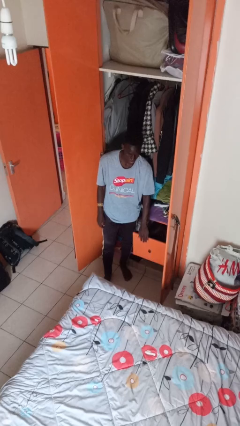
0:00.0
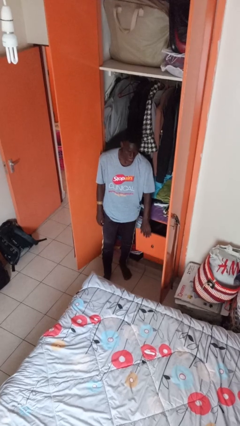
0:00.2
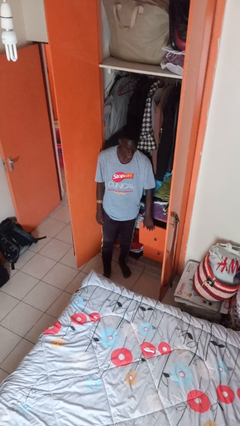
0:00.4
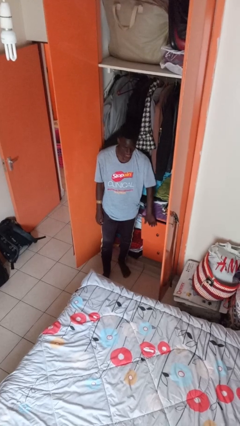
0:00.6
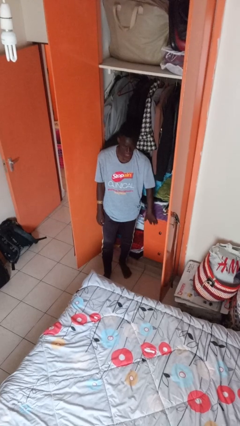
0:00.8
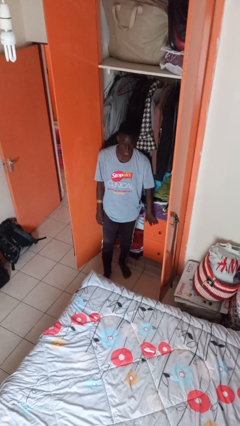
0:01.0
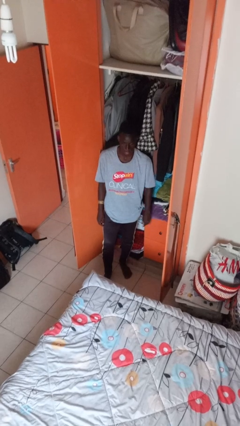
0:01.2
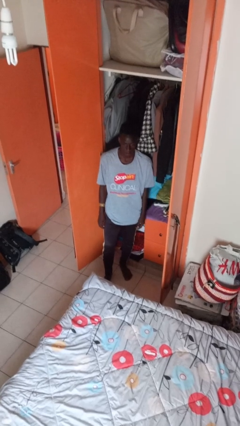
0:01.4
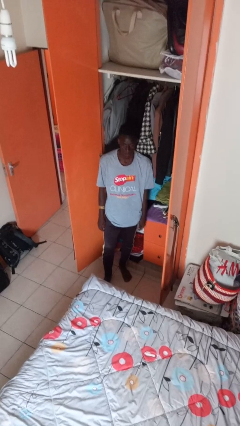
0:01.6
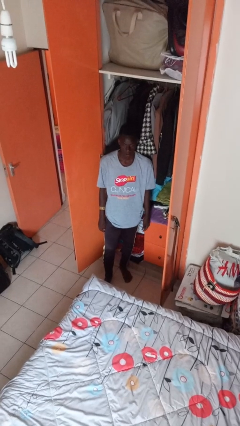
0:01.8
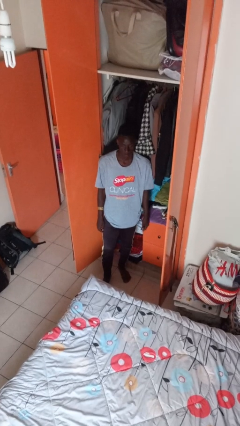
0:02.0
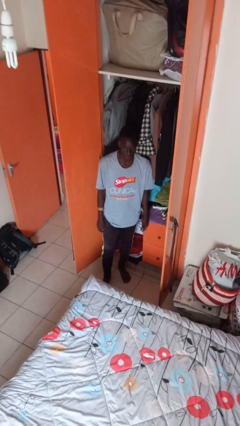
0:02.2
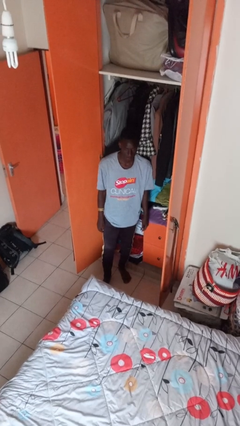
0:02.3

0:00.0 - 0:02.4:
person closes dresser drawer

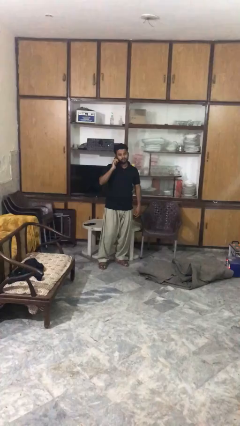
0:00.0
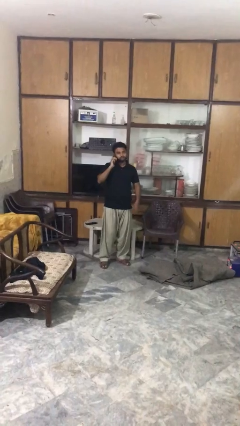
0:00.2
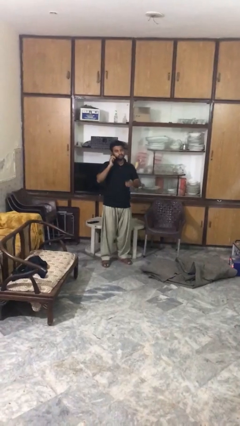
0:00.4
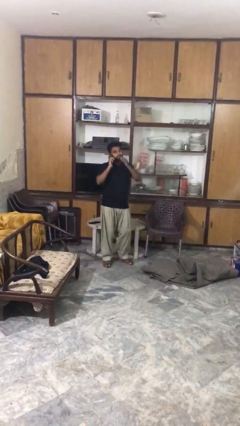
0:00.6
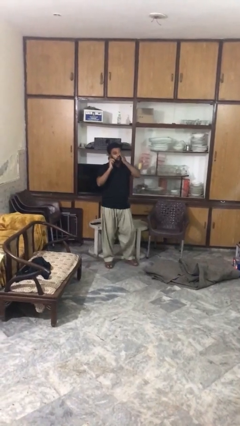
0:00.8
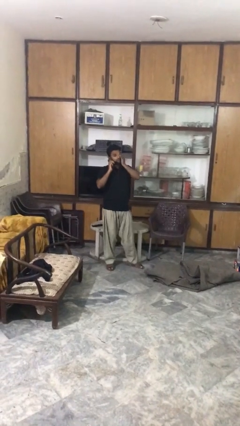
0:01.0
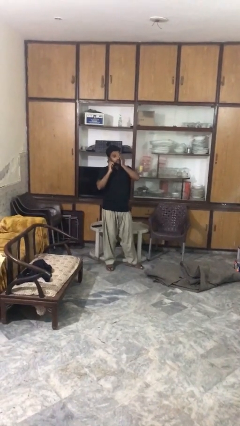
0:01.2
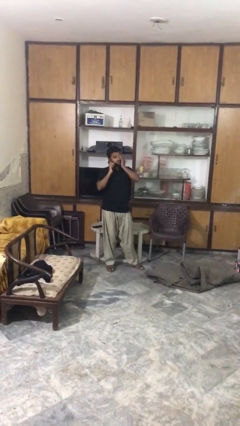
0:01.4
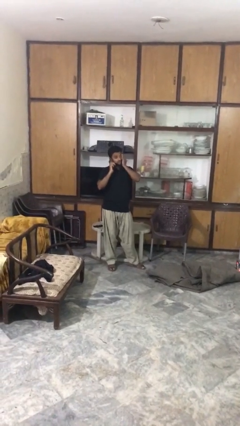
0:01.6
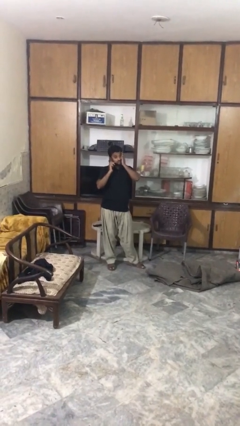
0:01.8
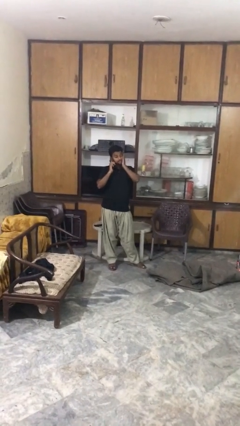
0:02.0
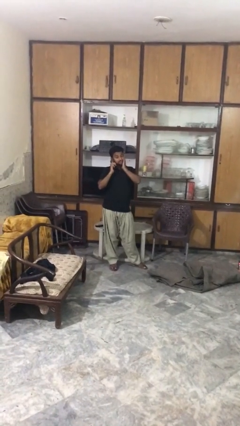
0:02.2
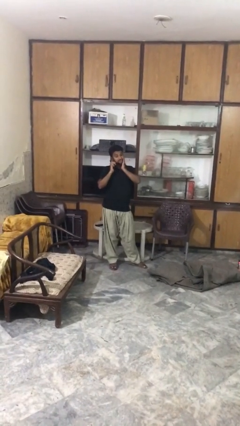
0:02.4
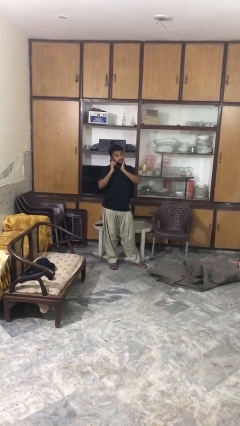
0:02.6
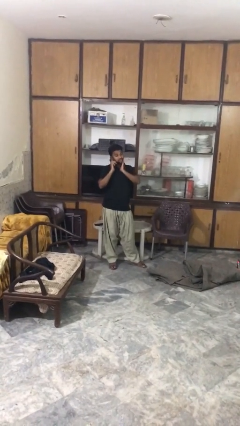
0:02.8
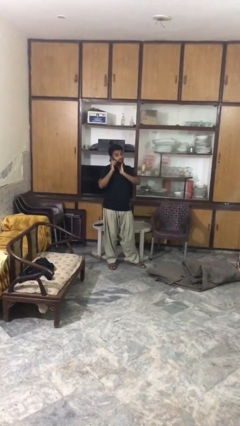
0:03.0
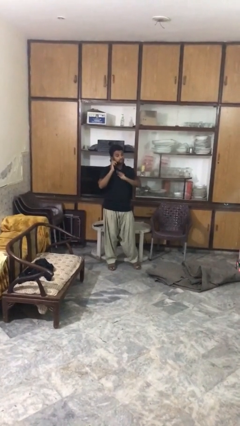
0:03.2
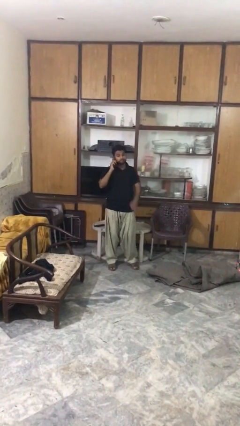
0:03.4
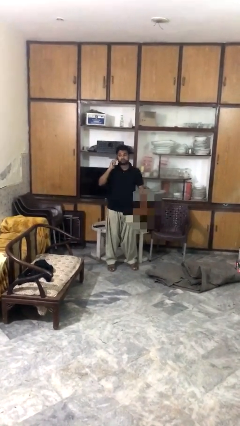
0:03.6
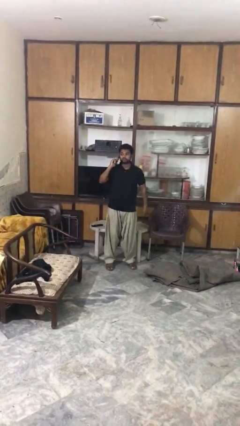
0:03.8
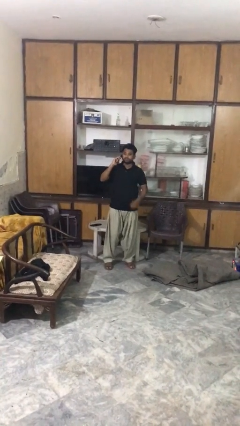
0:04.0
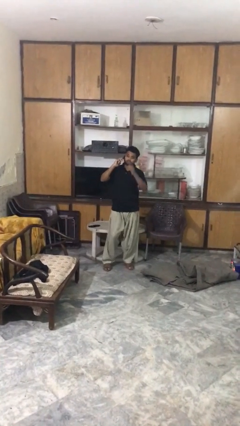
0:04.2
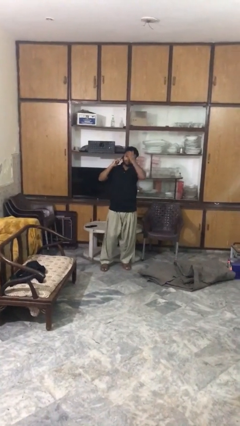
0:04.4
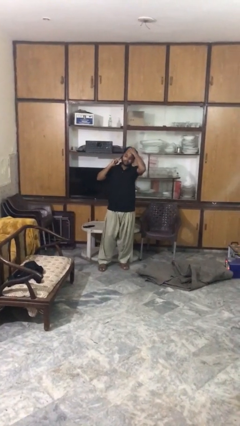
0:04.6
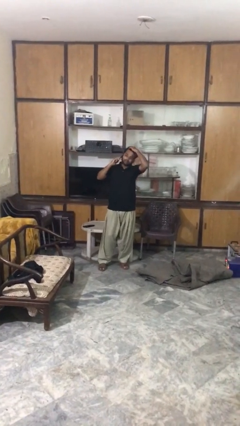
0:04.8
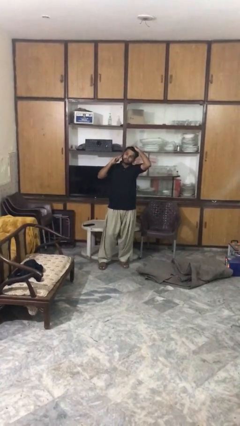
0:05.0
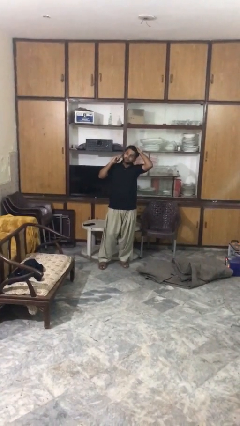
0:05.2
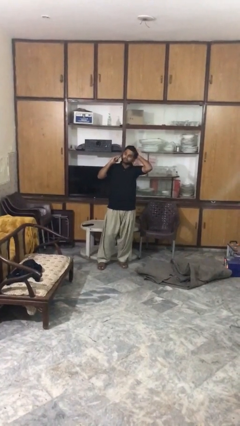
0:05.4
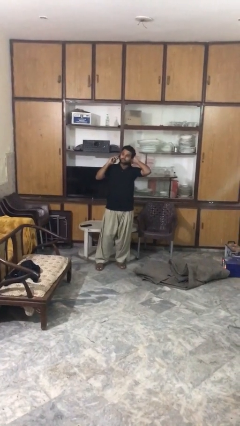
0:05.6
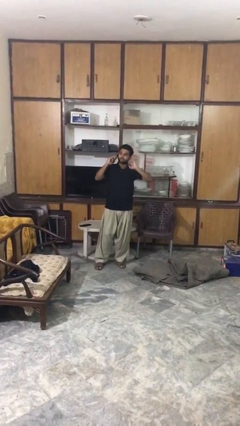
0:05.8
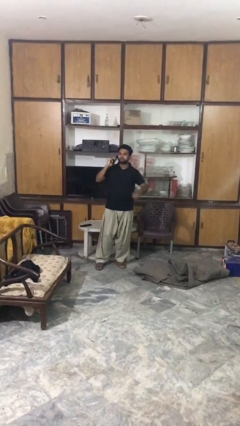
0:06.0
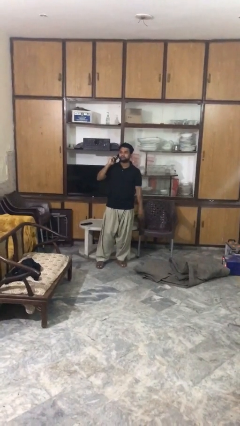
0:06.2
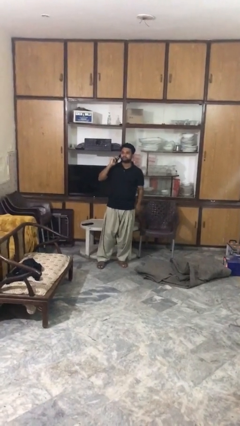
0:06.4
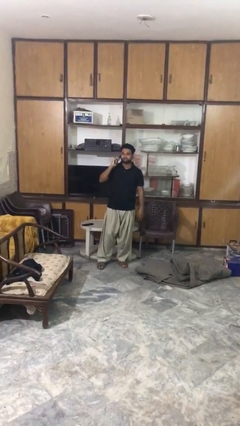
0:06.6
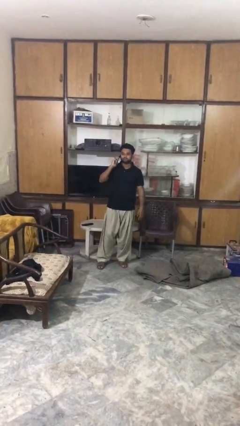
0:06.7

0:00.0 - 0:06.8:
person talks on phone

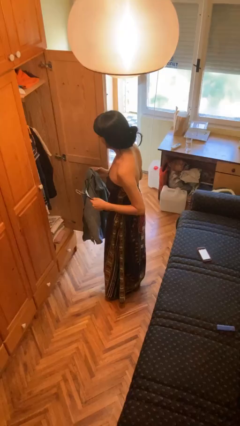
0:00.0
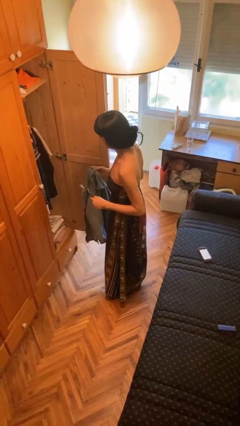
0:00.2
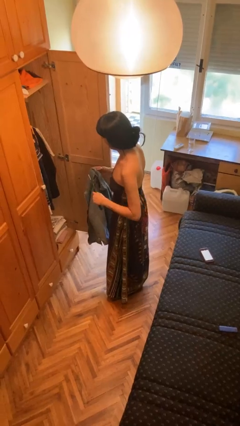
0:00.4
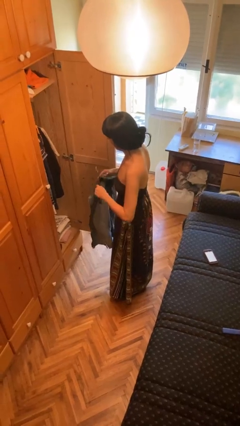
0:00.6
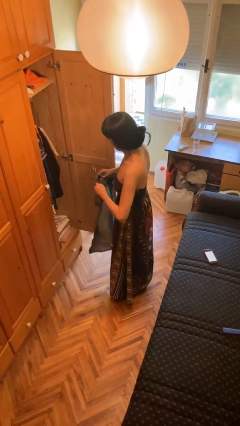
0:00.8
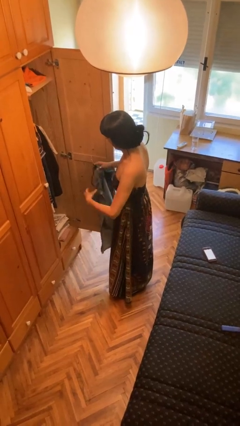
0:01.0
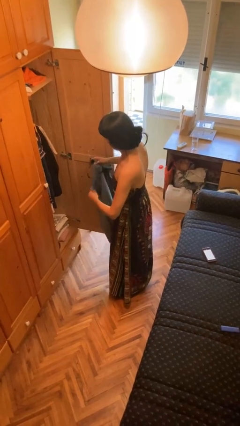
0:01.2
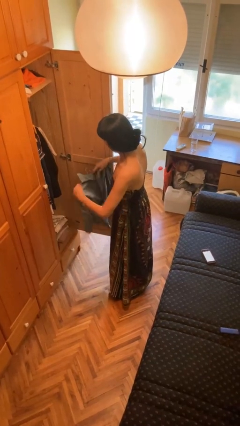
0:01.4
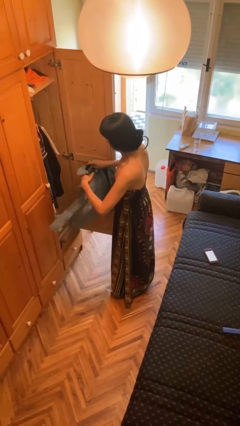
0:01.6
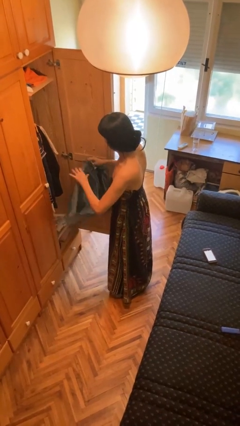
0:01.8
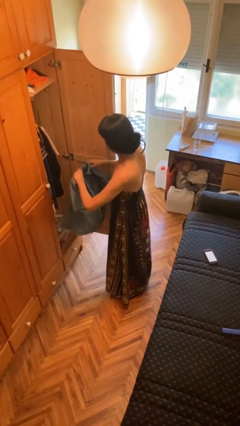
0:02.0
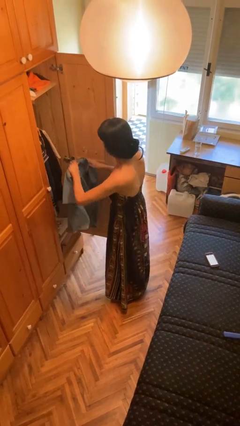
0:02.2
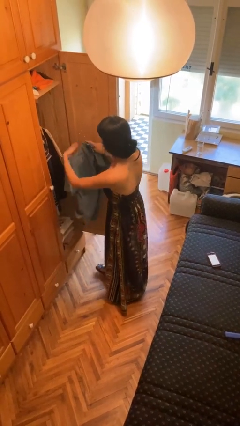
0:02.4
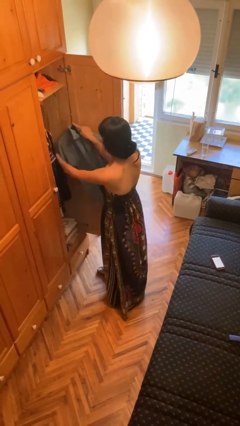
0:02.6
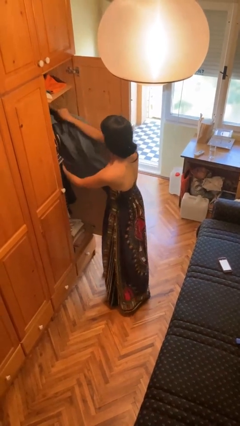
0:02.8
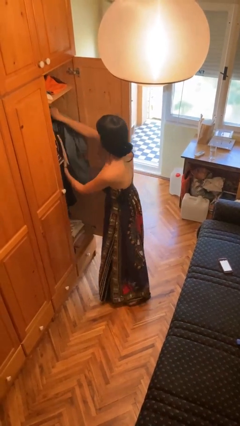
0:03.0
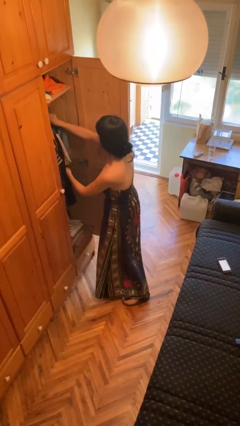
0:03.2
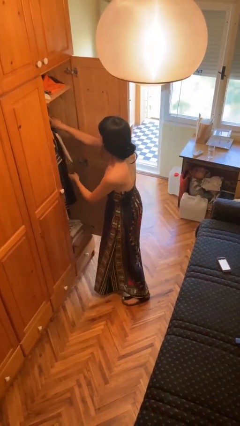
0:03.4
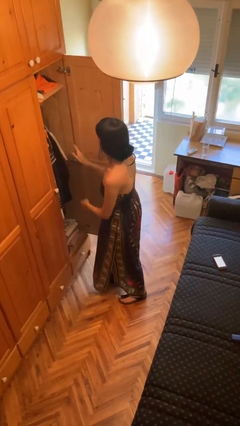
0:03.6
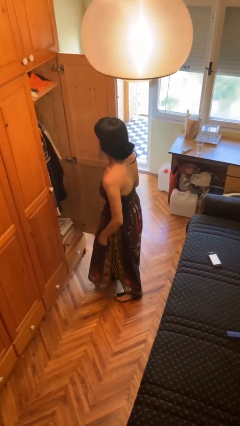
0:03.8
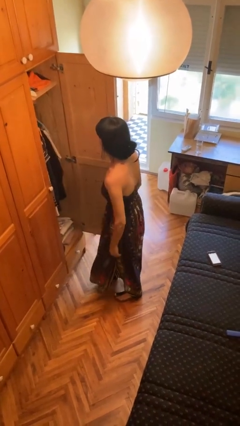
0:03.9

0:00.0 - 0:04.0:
person puts clothes into closet

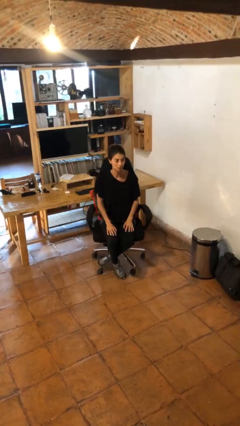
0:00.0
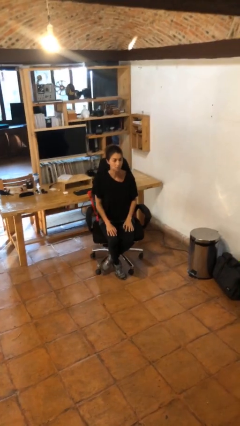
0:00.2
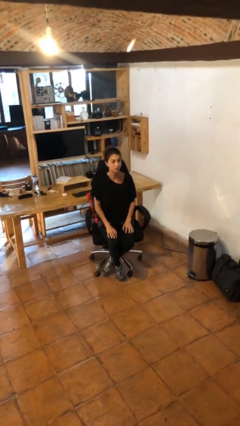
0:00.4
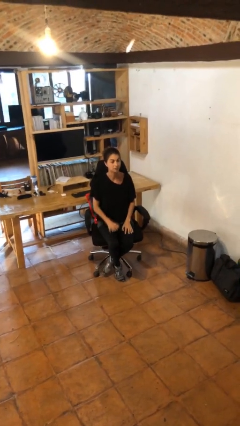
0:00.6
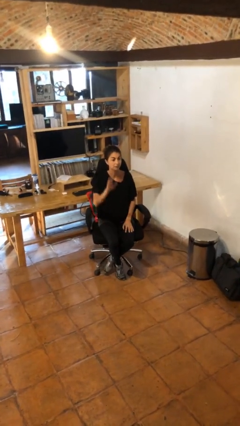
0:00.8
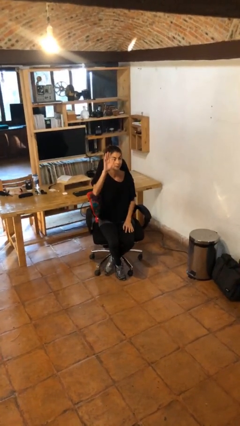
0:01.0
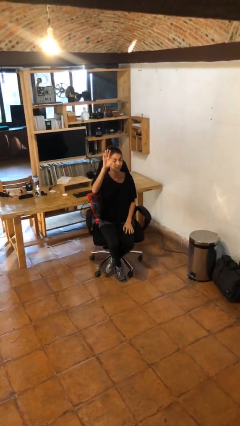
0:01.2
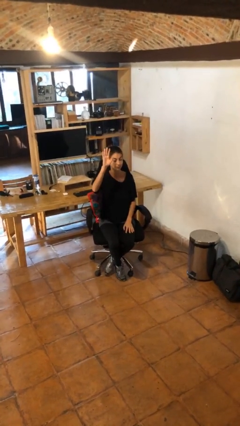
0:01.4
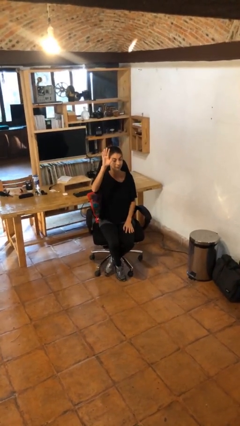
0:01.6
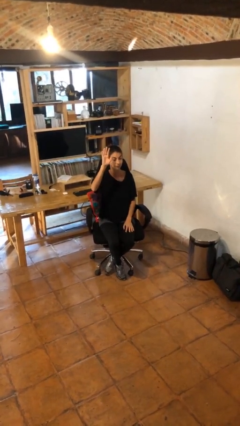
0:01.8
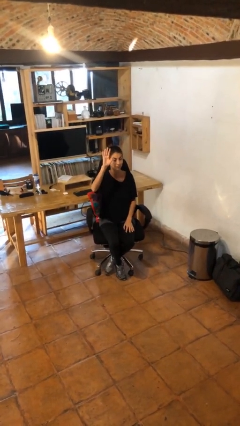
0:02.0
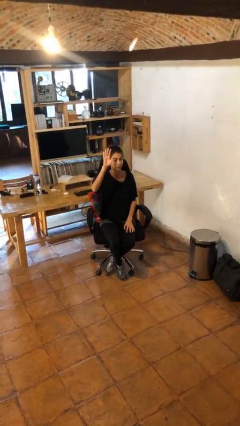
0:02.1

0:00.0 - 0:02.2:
person gestures raise hand

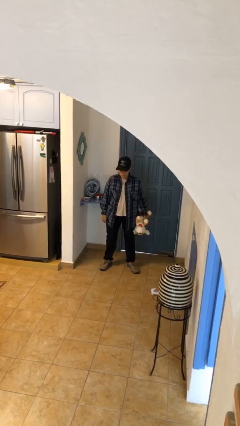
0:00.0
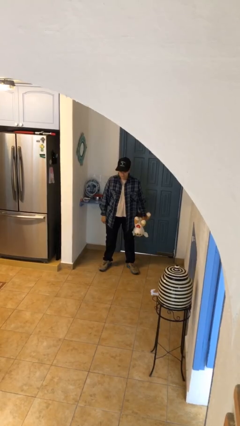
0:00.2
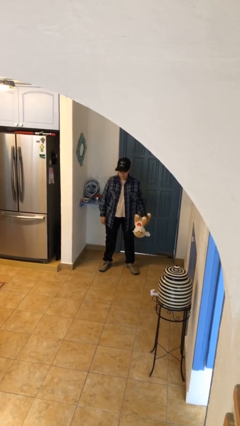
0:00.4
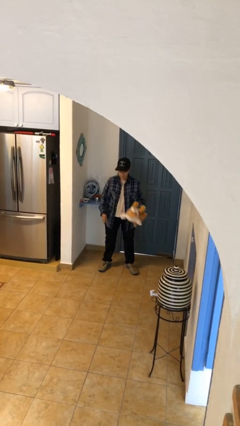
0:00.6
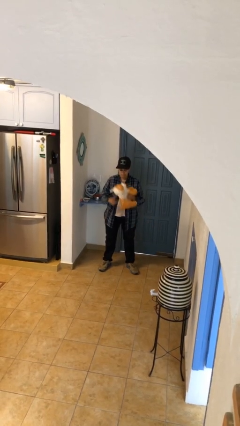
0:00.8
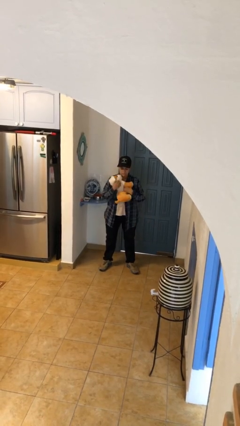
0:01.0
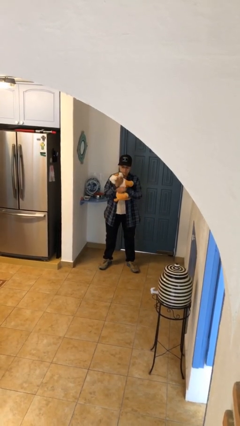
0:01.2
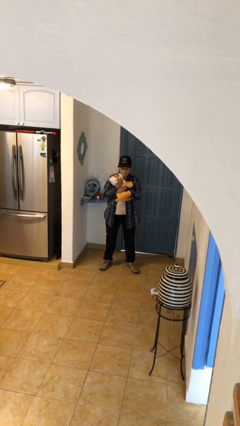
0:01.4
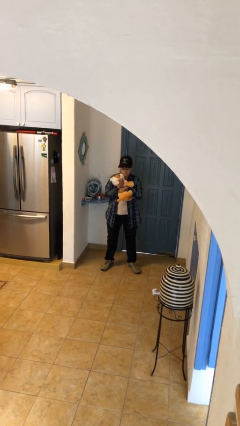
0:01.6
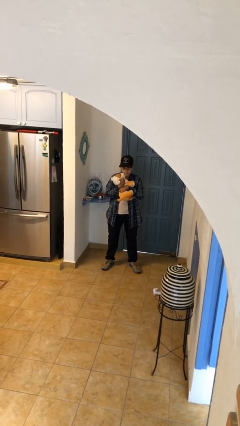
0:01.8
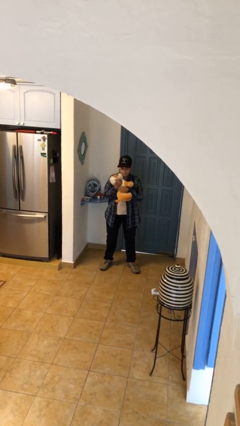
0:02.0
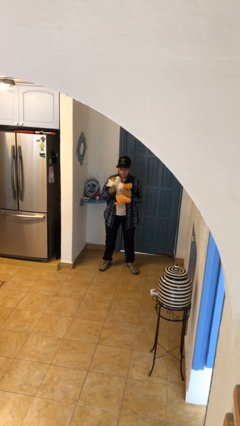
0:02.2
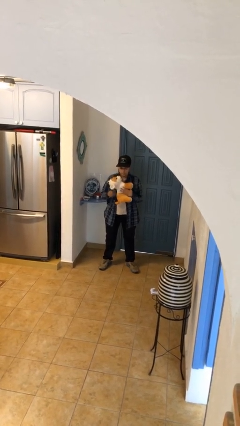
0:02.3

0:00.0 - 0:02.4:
person hugs stuffed animal
